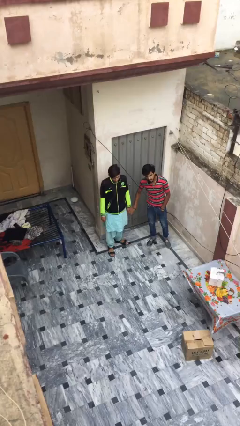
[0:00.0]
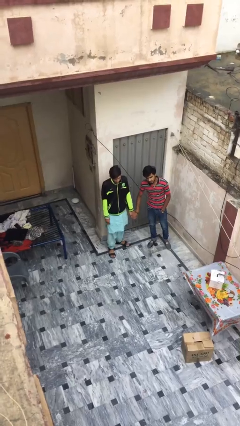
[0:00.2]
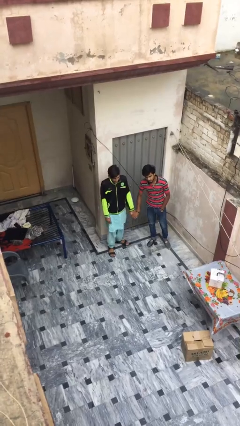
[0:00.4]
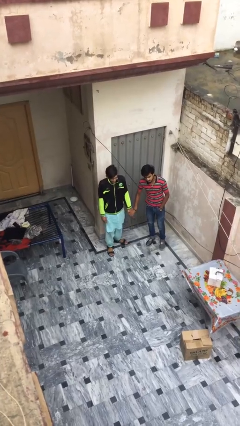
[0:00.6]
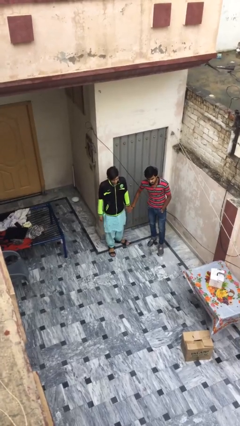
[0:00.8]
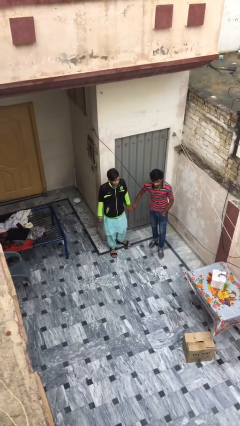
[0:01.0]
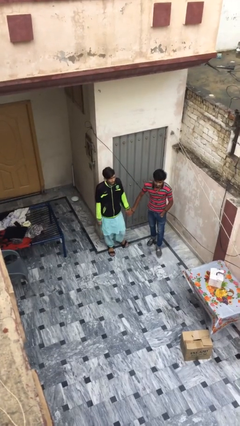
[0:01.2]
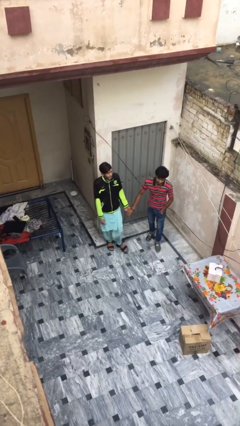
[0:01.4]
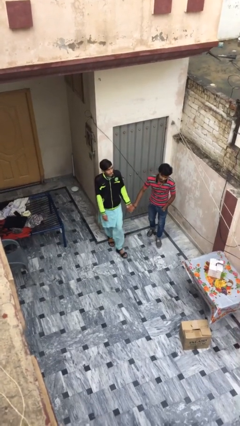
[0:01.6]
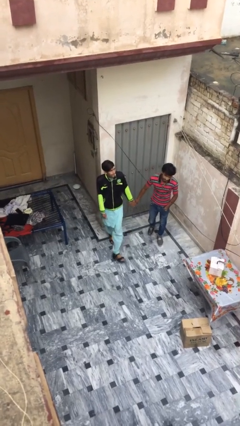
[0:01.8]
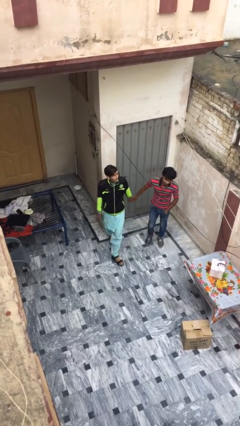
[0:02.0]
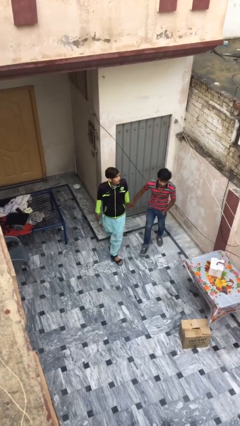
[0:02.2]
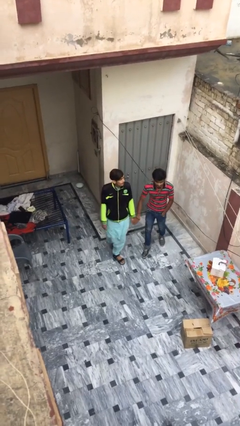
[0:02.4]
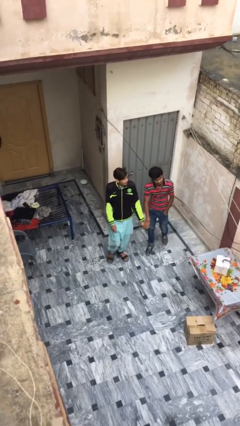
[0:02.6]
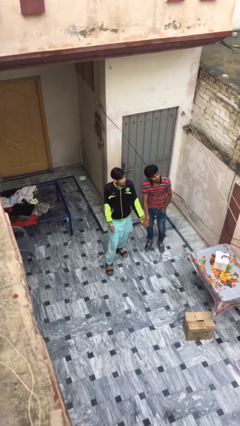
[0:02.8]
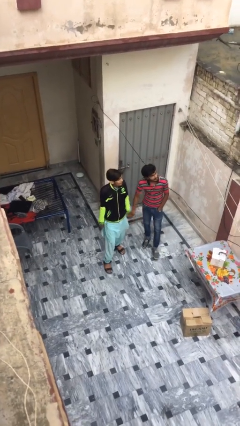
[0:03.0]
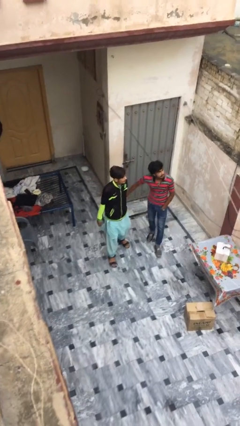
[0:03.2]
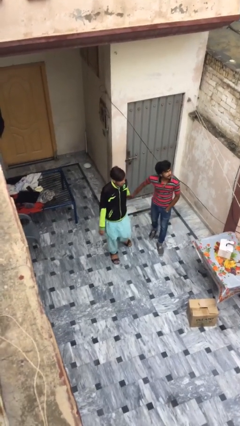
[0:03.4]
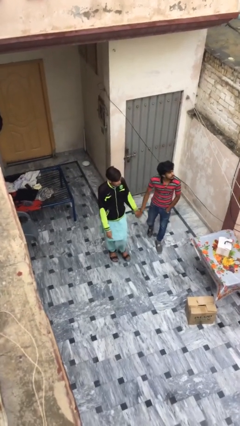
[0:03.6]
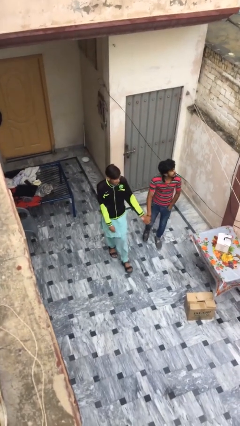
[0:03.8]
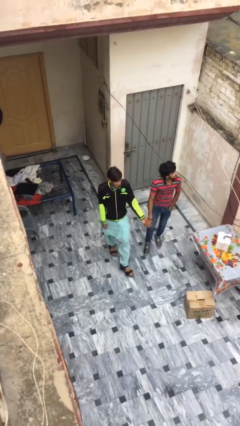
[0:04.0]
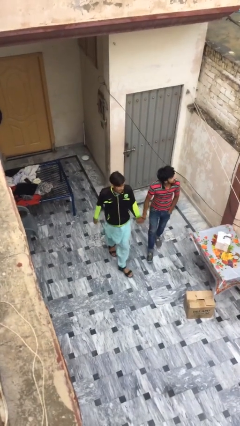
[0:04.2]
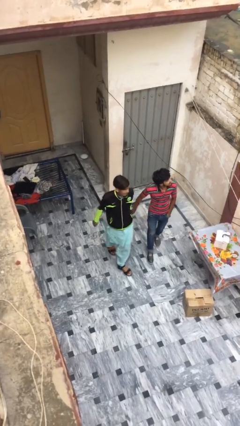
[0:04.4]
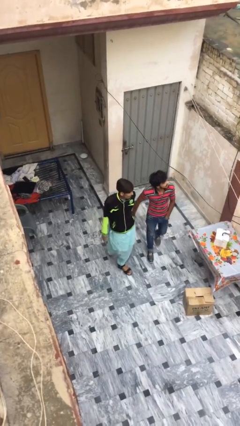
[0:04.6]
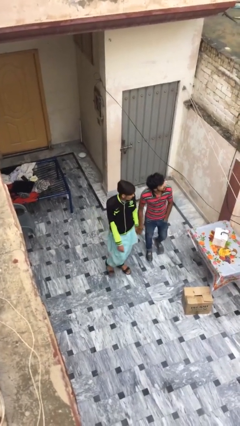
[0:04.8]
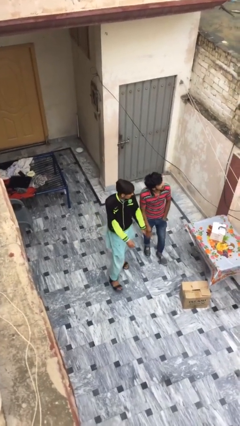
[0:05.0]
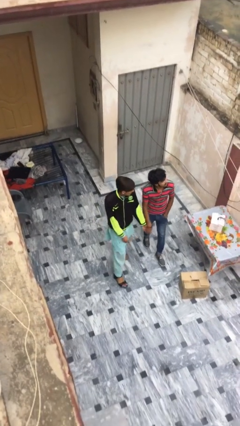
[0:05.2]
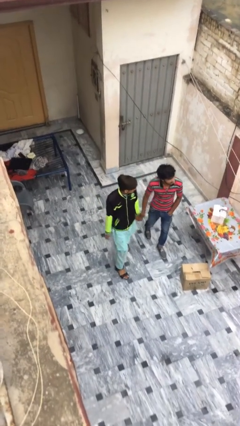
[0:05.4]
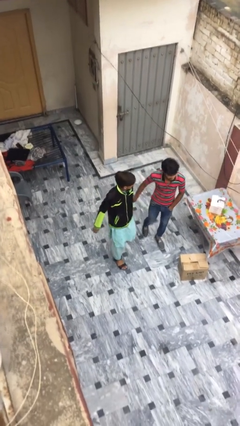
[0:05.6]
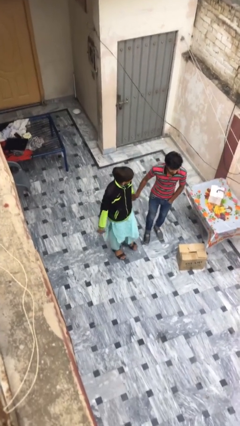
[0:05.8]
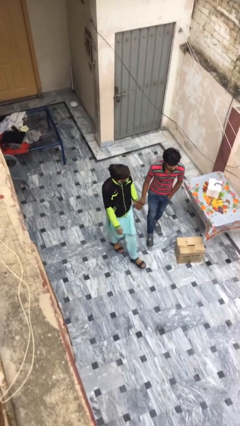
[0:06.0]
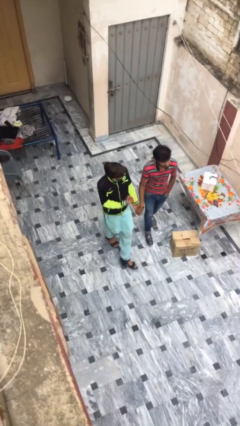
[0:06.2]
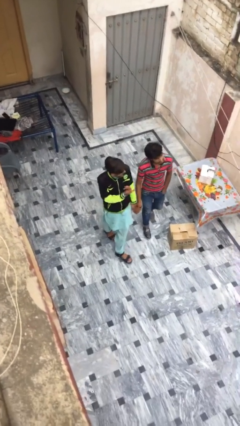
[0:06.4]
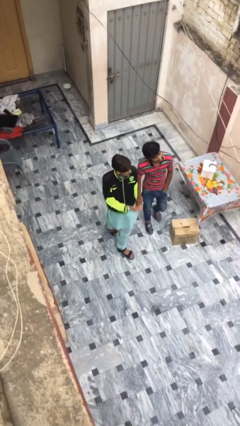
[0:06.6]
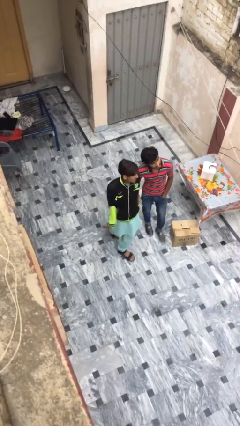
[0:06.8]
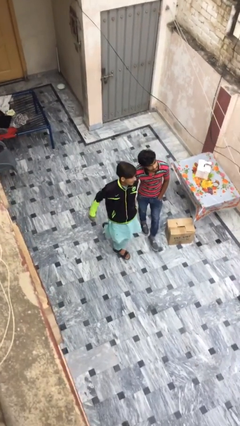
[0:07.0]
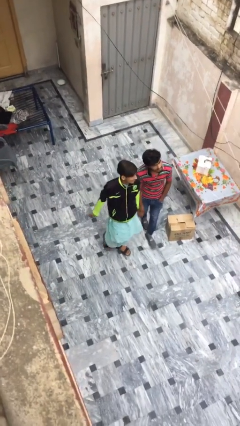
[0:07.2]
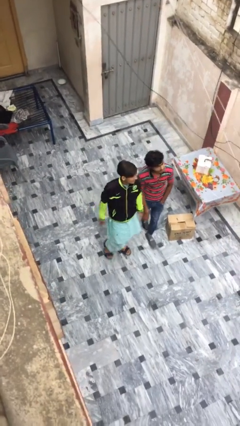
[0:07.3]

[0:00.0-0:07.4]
person holds hand

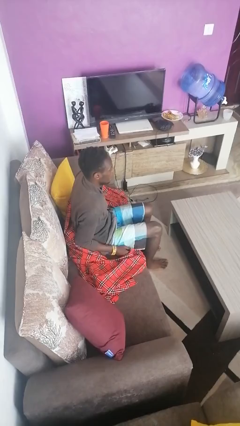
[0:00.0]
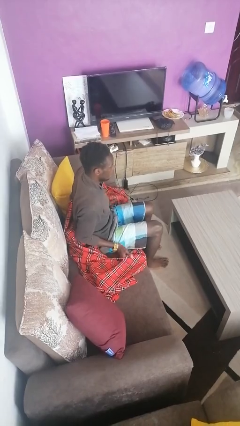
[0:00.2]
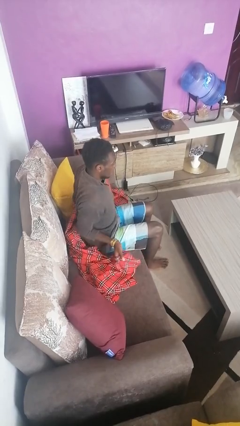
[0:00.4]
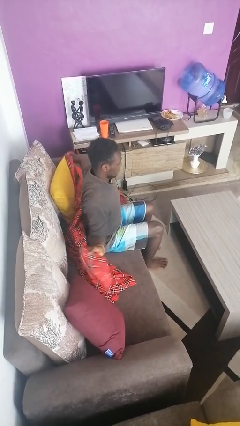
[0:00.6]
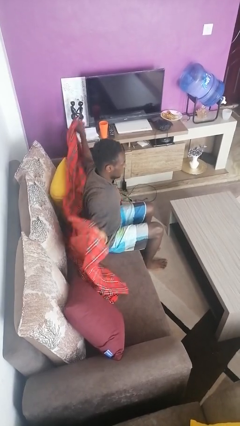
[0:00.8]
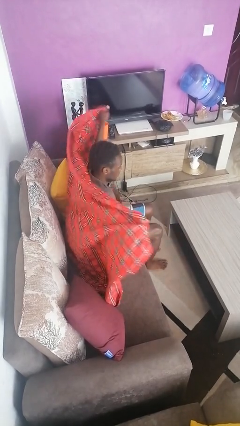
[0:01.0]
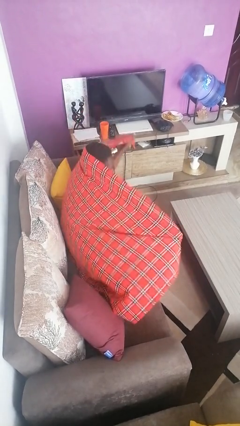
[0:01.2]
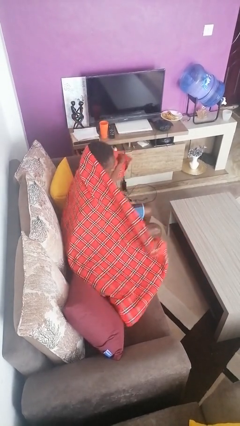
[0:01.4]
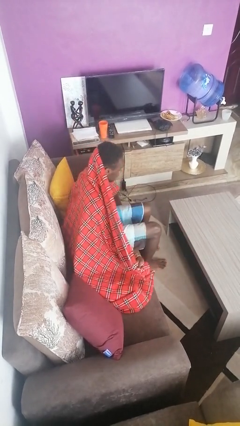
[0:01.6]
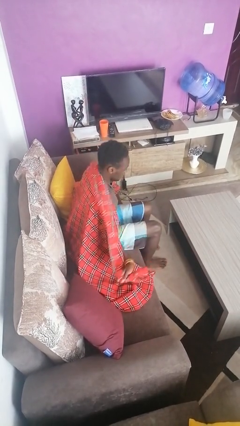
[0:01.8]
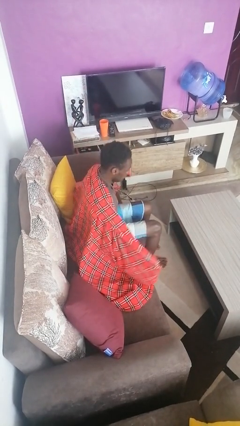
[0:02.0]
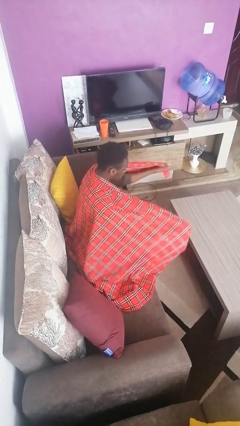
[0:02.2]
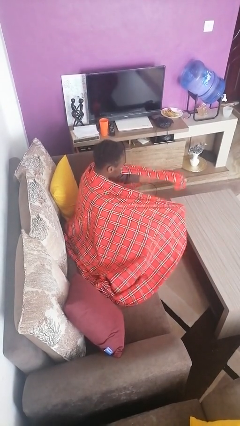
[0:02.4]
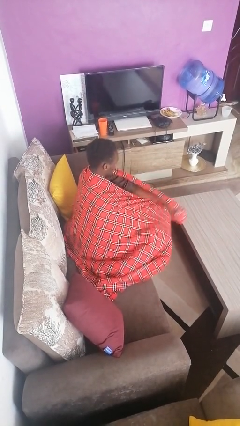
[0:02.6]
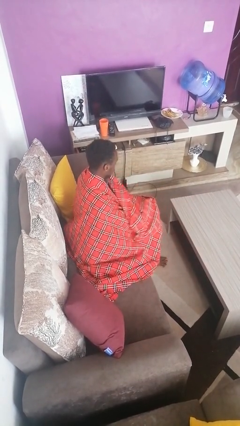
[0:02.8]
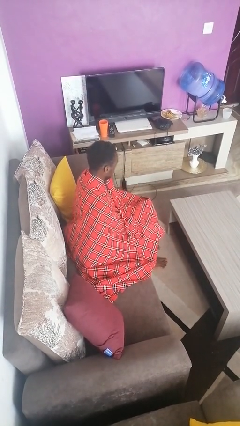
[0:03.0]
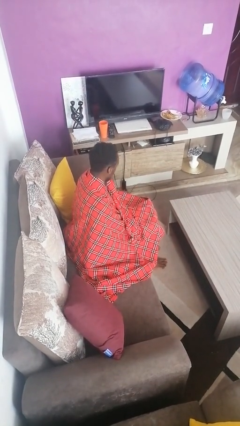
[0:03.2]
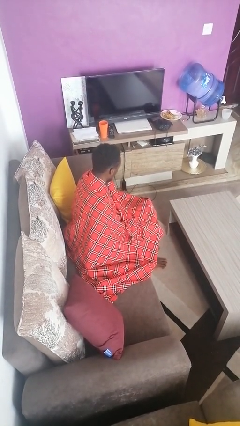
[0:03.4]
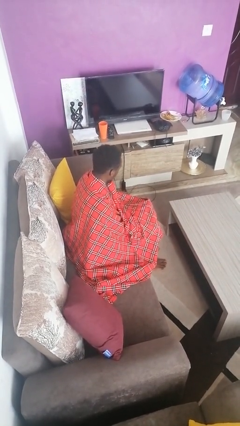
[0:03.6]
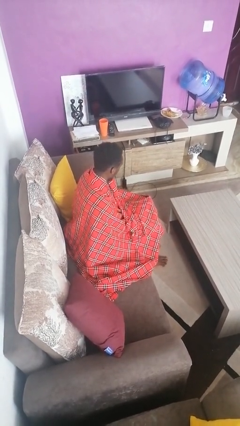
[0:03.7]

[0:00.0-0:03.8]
person covers with blanket

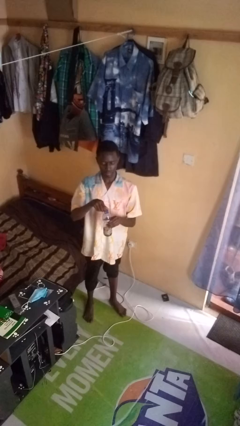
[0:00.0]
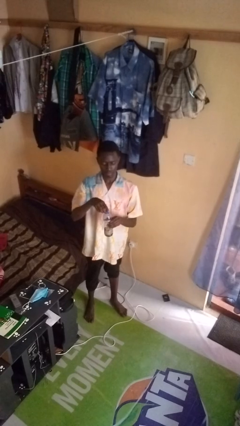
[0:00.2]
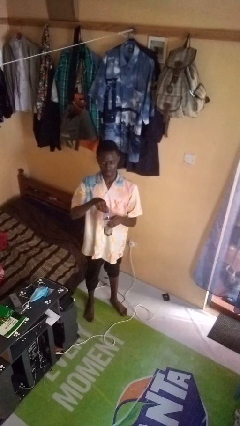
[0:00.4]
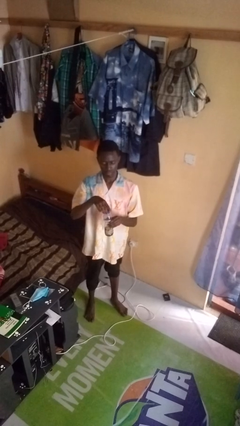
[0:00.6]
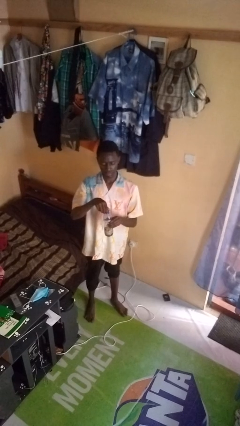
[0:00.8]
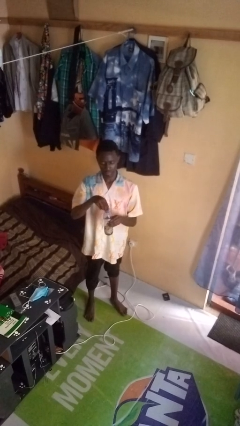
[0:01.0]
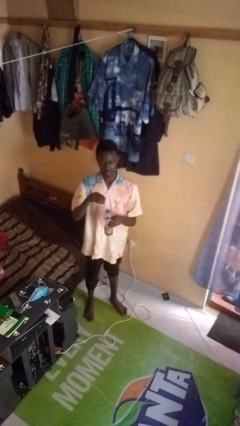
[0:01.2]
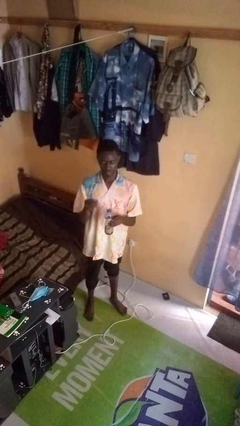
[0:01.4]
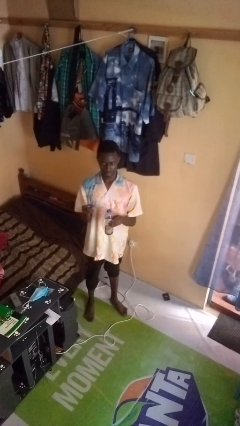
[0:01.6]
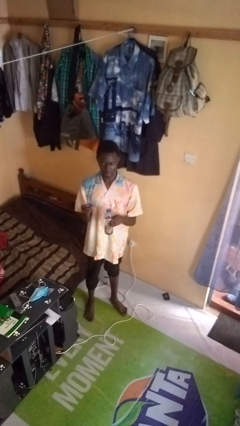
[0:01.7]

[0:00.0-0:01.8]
person unscrews lid from bottle

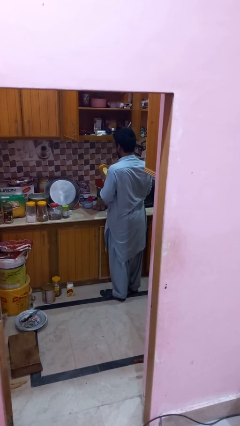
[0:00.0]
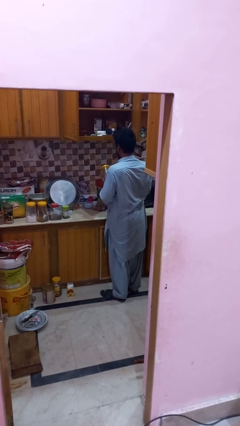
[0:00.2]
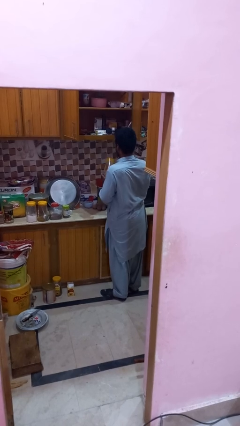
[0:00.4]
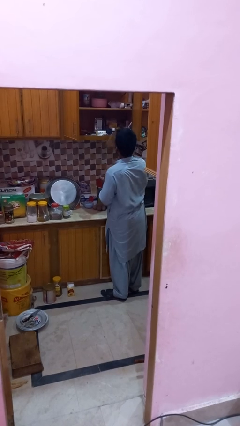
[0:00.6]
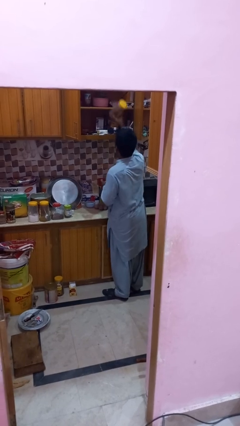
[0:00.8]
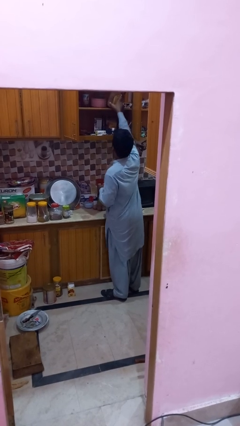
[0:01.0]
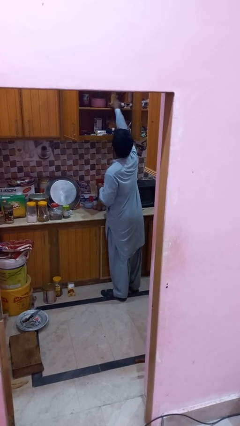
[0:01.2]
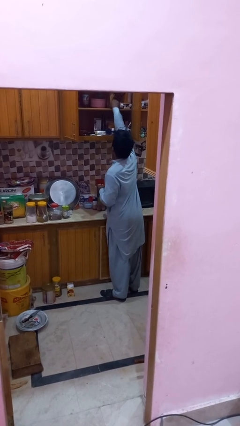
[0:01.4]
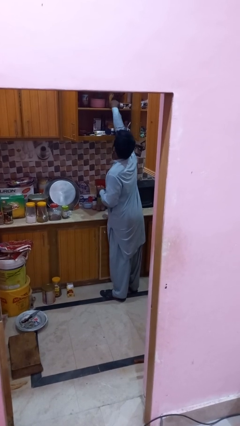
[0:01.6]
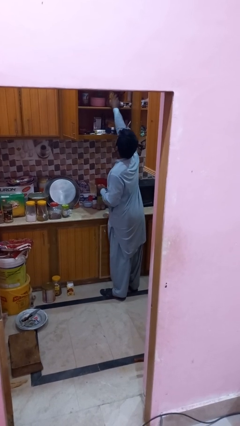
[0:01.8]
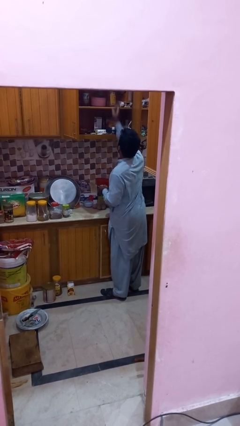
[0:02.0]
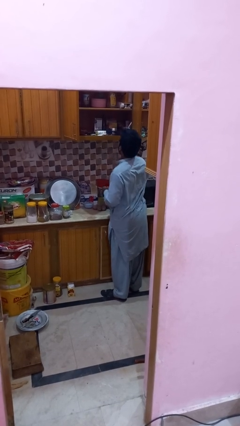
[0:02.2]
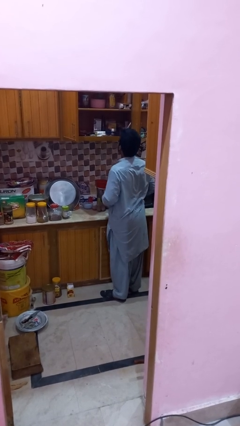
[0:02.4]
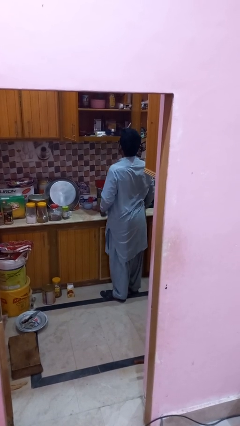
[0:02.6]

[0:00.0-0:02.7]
person puts object in cabinet

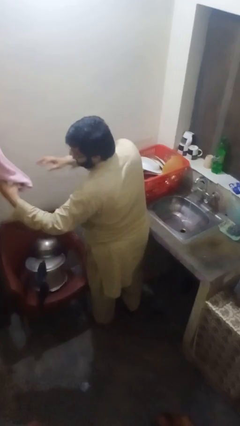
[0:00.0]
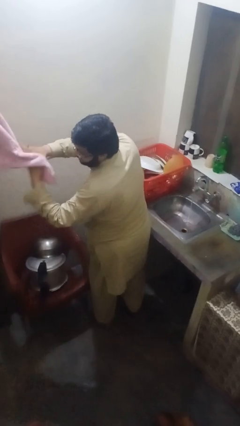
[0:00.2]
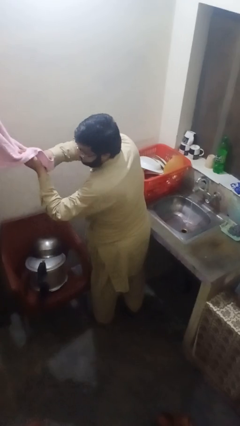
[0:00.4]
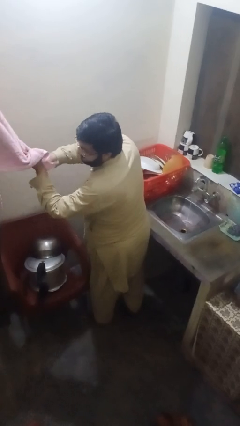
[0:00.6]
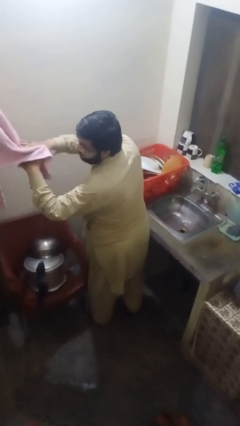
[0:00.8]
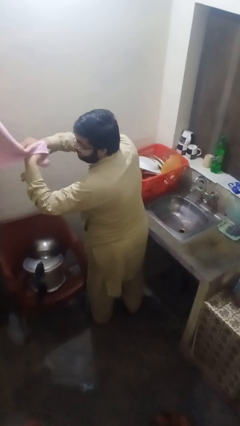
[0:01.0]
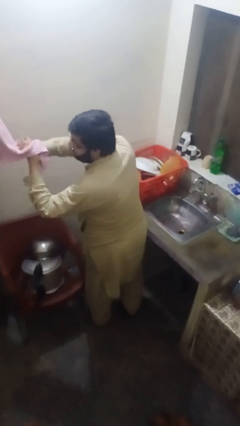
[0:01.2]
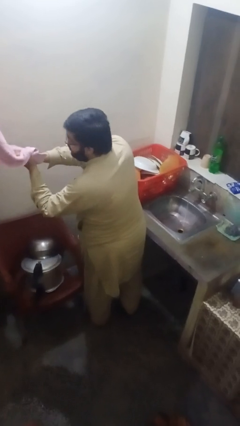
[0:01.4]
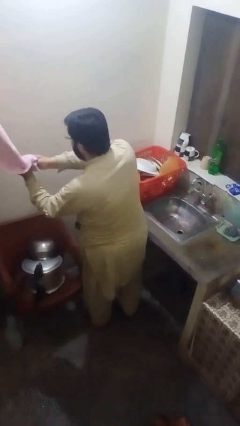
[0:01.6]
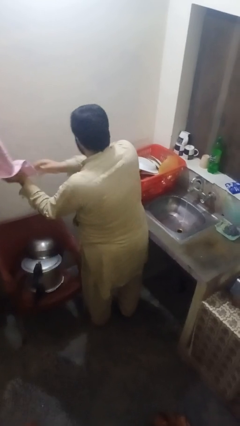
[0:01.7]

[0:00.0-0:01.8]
person dries hands with towel
